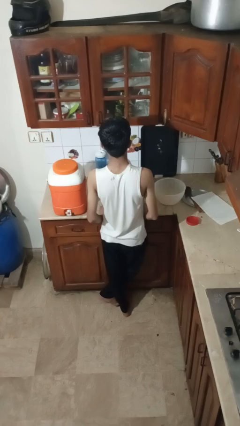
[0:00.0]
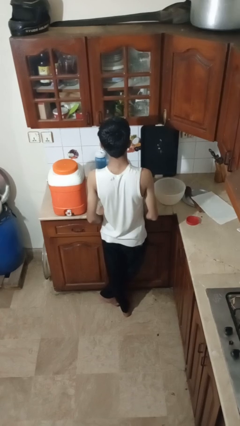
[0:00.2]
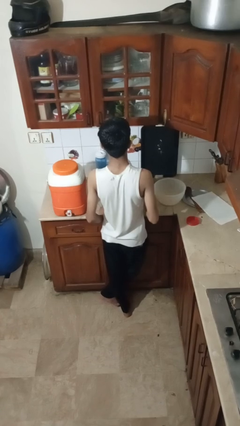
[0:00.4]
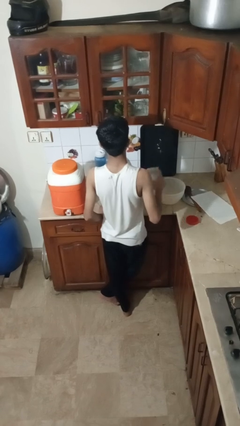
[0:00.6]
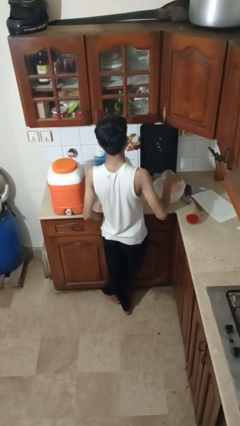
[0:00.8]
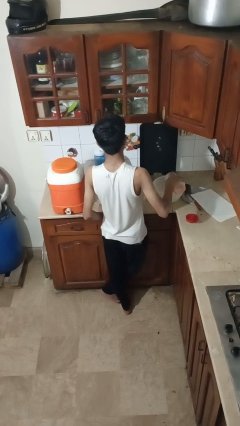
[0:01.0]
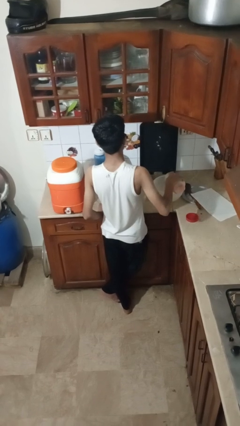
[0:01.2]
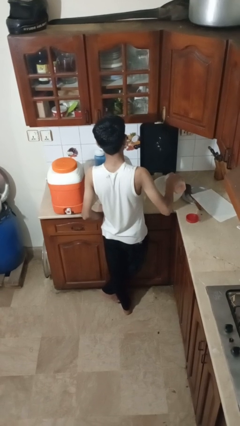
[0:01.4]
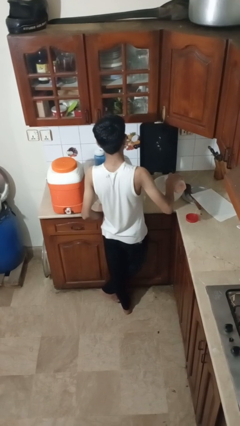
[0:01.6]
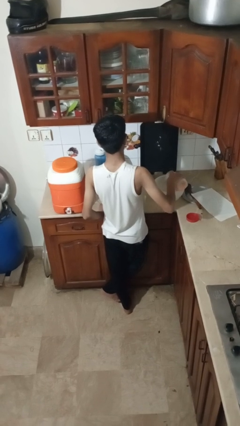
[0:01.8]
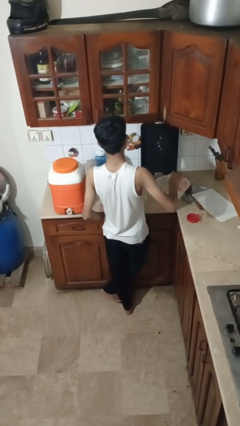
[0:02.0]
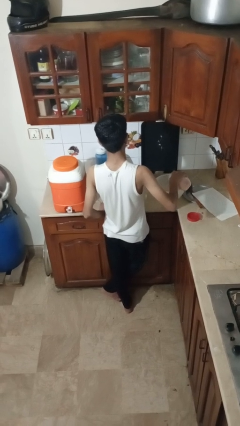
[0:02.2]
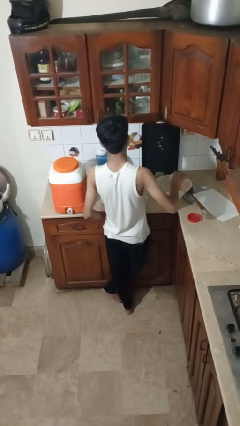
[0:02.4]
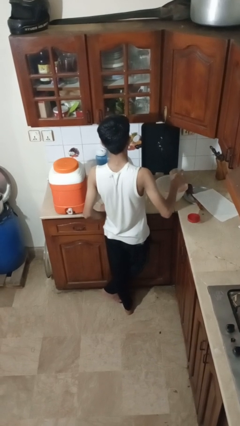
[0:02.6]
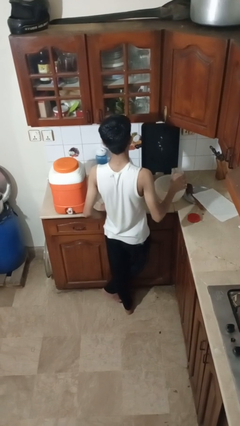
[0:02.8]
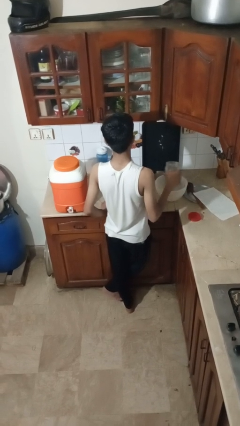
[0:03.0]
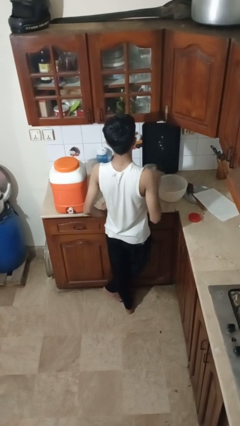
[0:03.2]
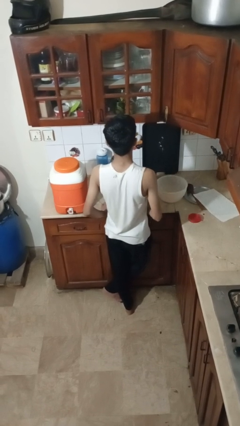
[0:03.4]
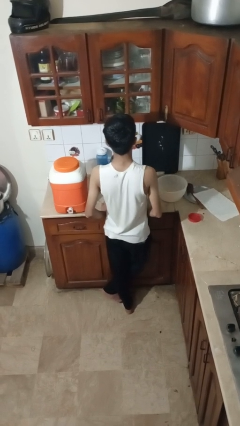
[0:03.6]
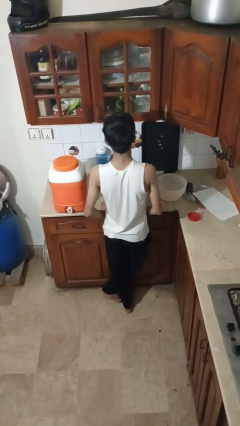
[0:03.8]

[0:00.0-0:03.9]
person pours into bowl

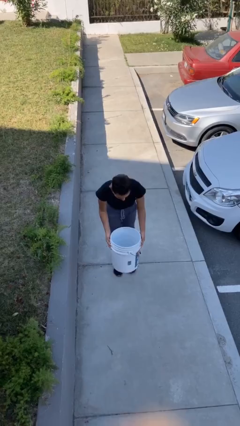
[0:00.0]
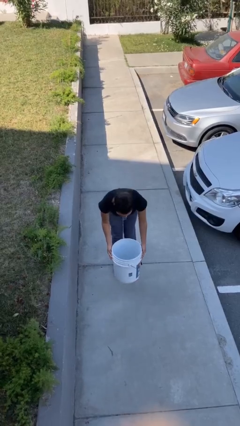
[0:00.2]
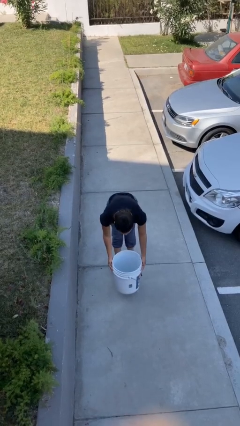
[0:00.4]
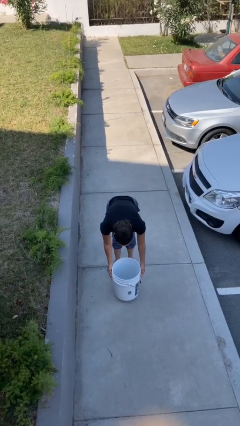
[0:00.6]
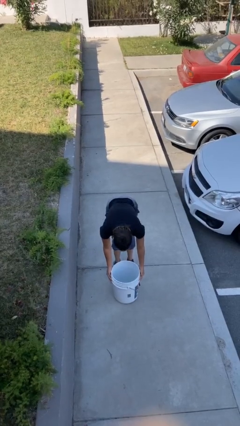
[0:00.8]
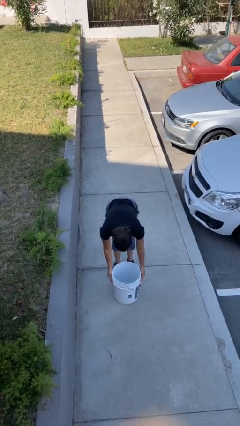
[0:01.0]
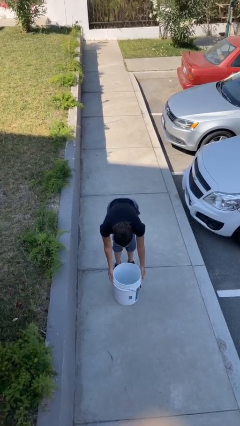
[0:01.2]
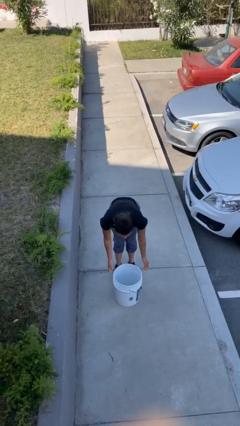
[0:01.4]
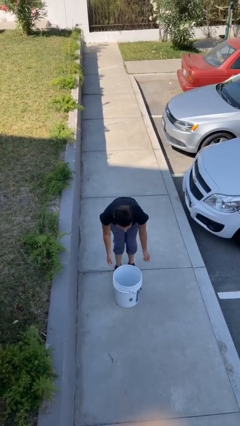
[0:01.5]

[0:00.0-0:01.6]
person puts down object on floor

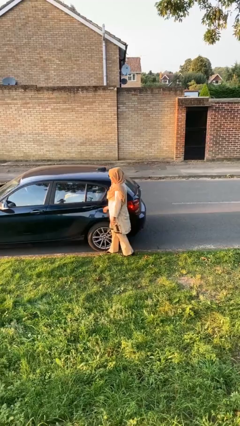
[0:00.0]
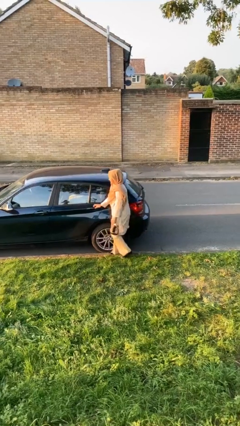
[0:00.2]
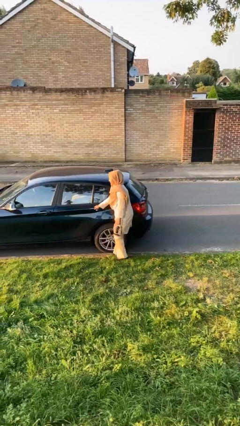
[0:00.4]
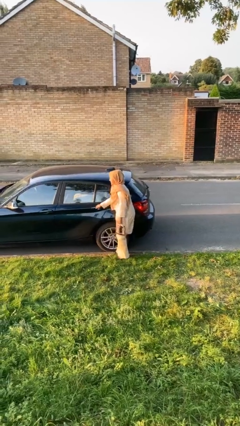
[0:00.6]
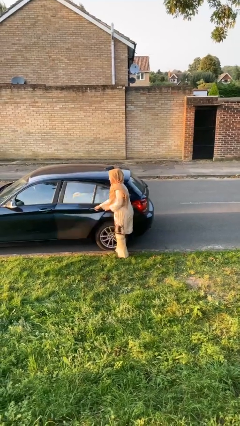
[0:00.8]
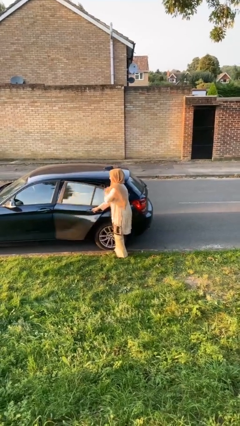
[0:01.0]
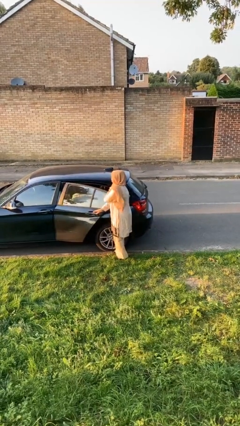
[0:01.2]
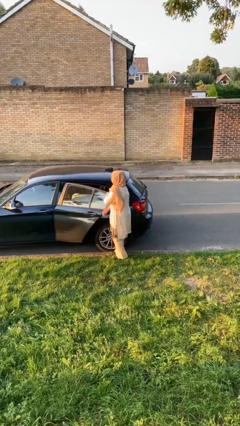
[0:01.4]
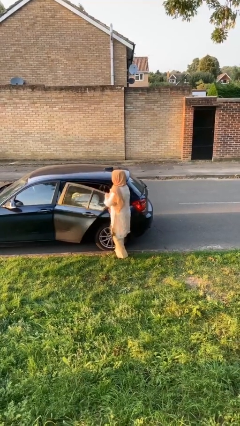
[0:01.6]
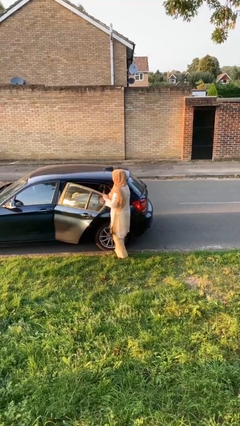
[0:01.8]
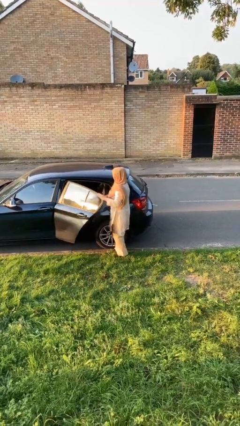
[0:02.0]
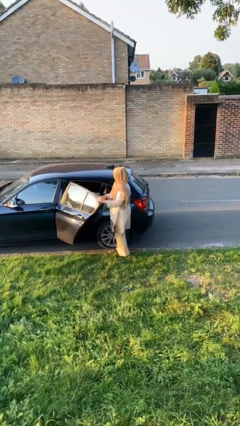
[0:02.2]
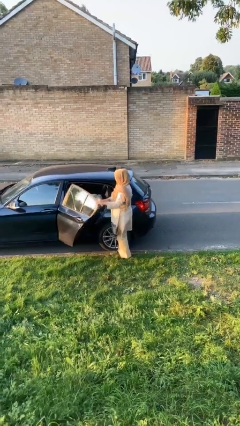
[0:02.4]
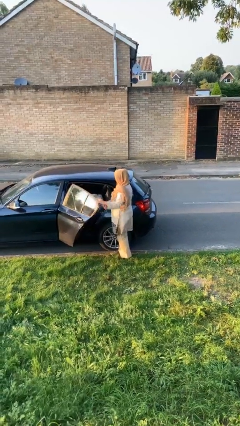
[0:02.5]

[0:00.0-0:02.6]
person opens car door

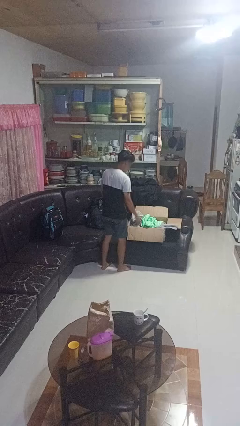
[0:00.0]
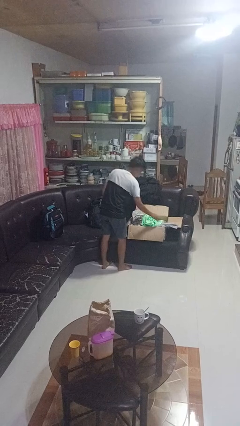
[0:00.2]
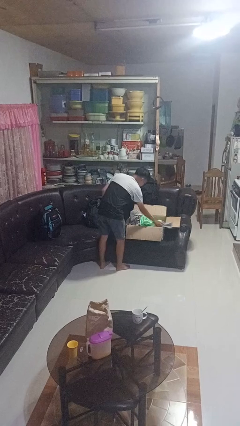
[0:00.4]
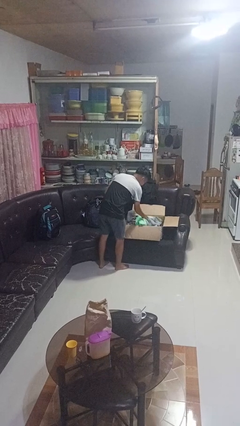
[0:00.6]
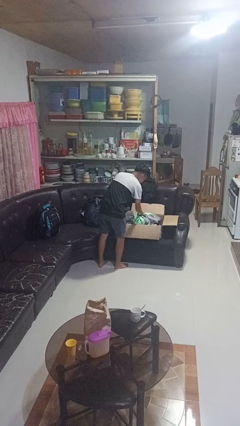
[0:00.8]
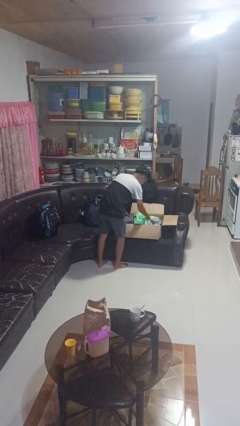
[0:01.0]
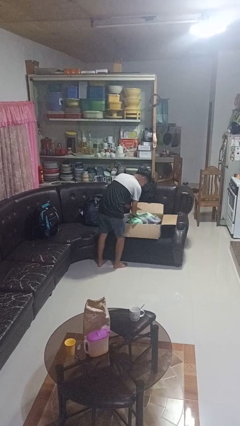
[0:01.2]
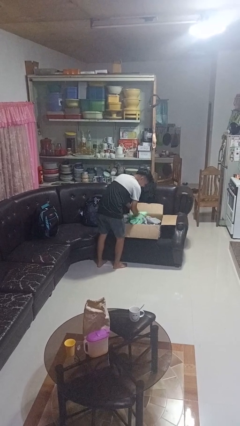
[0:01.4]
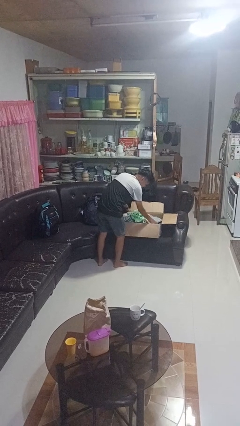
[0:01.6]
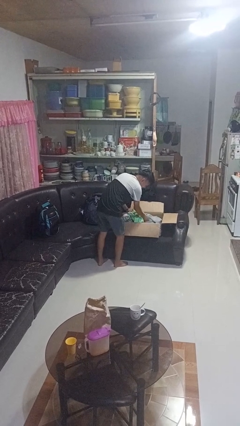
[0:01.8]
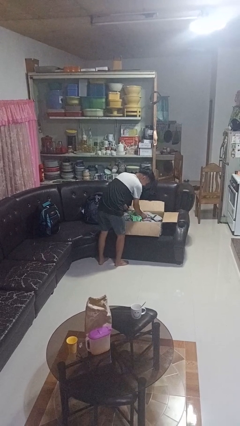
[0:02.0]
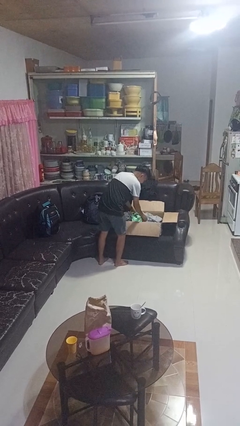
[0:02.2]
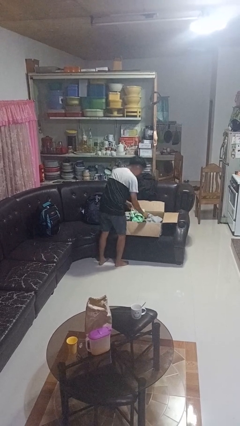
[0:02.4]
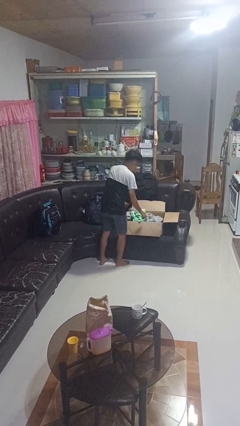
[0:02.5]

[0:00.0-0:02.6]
person searches in box

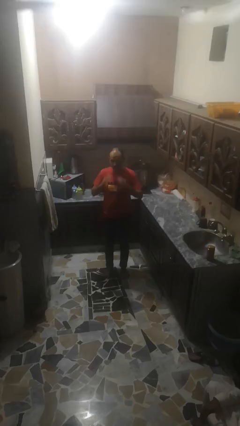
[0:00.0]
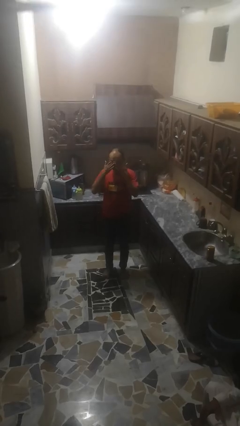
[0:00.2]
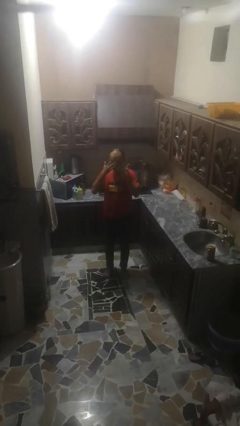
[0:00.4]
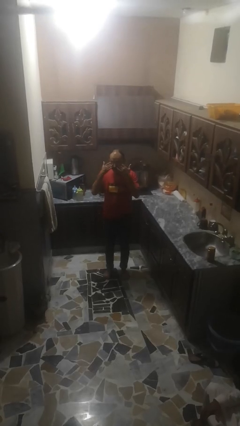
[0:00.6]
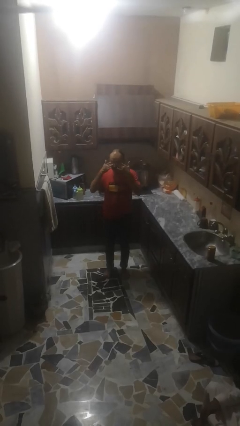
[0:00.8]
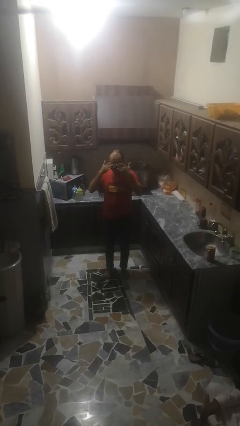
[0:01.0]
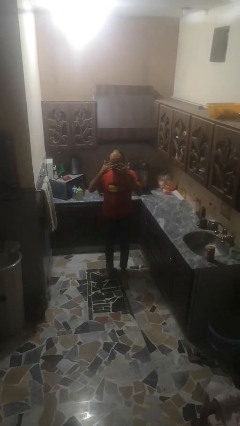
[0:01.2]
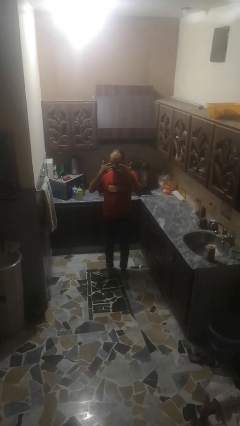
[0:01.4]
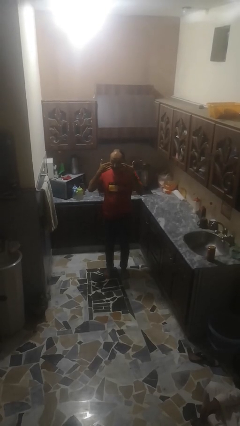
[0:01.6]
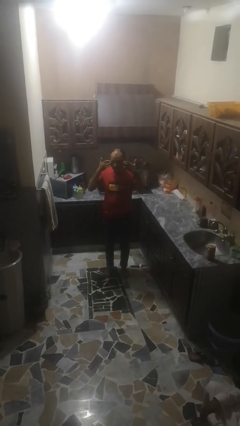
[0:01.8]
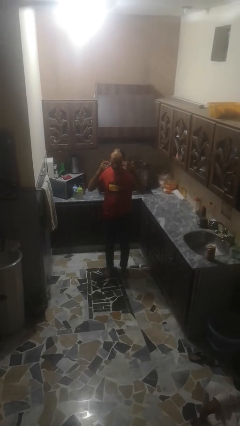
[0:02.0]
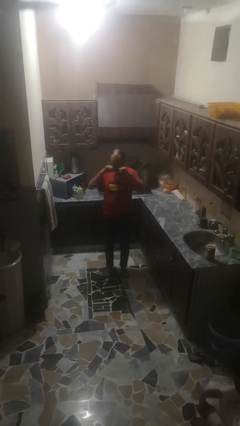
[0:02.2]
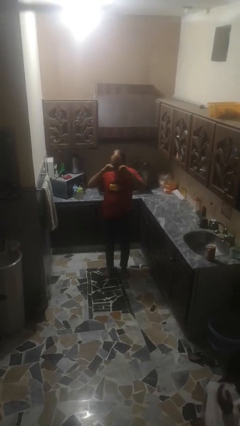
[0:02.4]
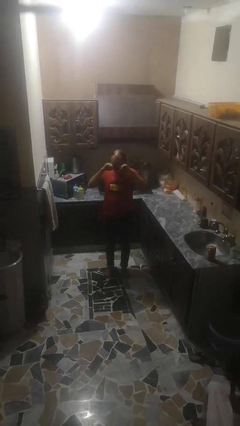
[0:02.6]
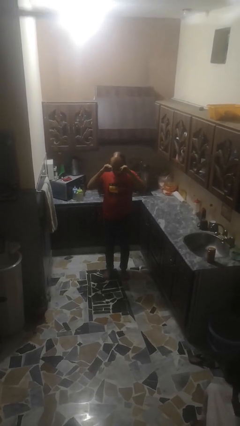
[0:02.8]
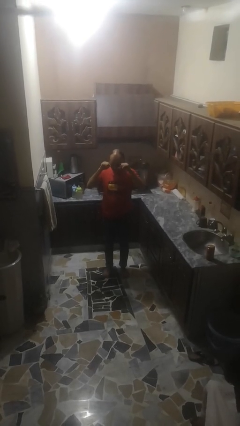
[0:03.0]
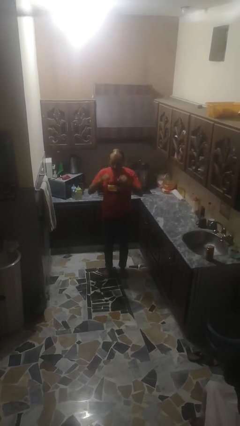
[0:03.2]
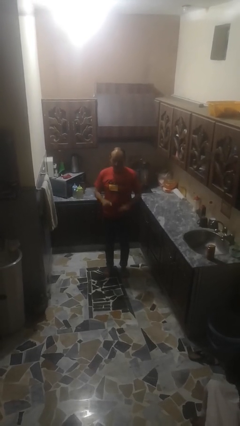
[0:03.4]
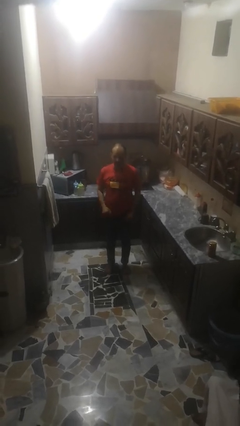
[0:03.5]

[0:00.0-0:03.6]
person rubs eyes

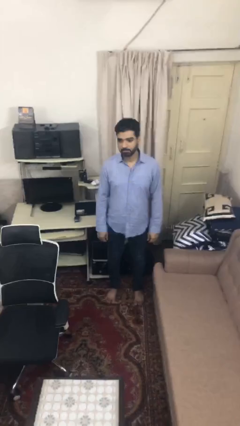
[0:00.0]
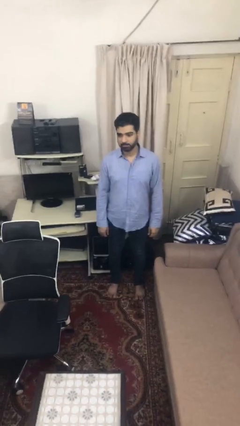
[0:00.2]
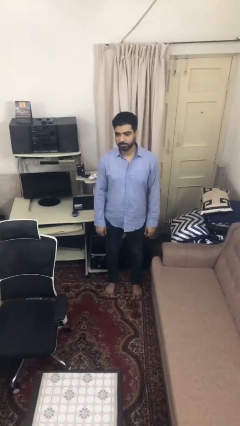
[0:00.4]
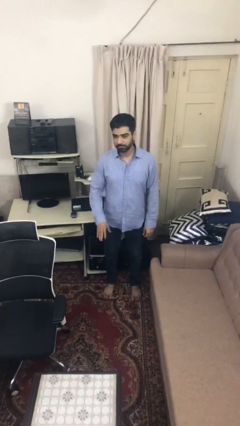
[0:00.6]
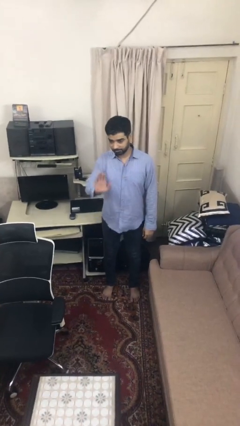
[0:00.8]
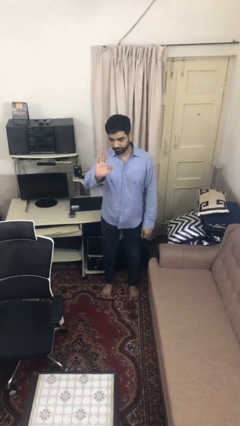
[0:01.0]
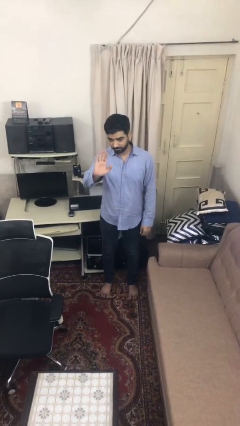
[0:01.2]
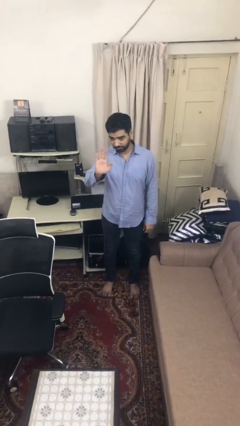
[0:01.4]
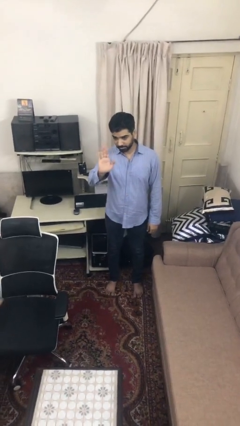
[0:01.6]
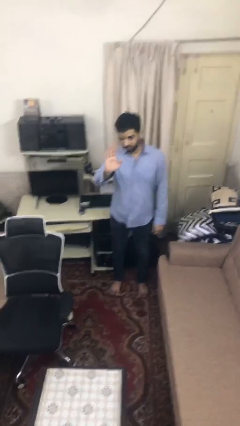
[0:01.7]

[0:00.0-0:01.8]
person waves at person

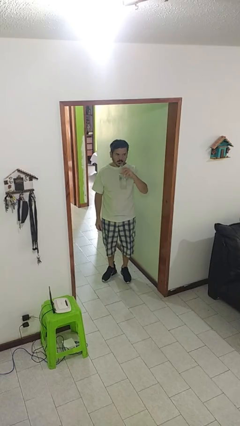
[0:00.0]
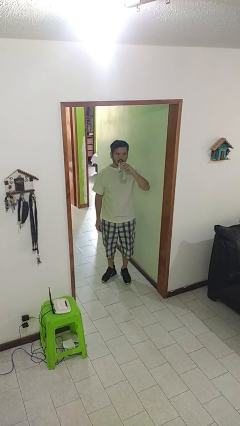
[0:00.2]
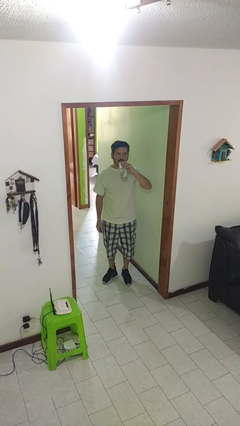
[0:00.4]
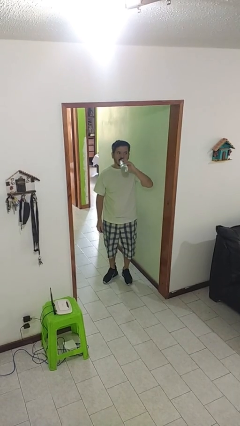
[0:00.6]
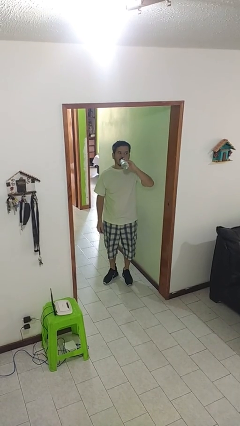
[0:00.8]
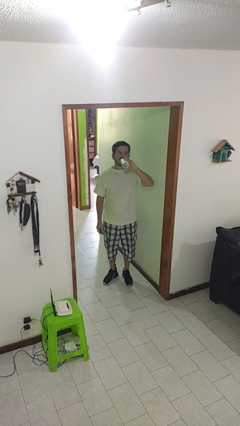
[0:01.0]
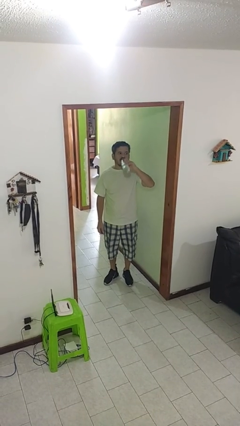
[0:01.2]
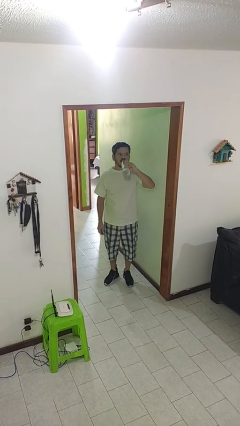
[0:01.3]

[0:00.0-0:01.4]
person drinks from bottle
